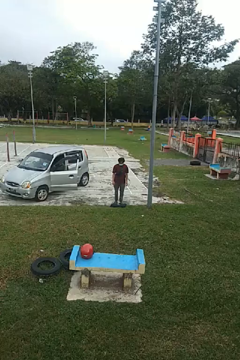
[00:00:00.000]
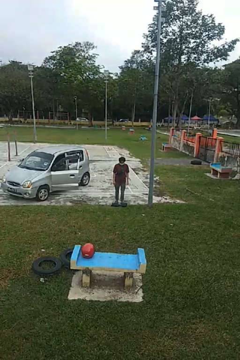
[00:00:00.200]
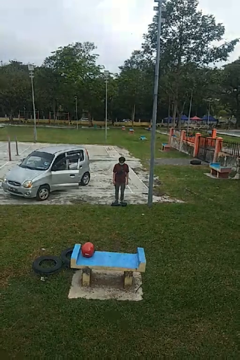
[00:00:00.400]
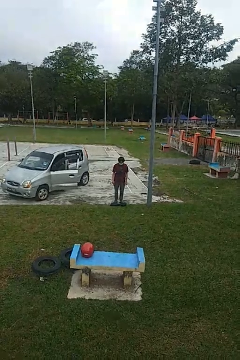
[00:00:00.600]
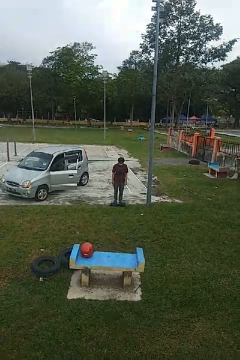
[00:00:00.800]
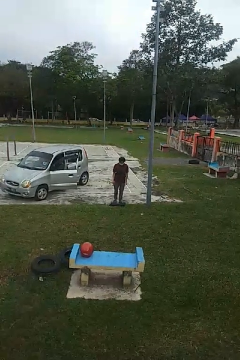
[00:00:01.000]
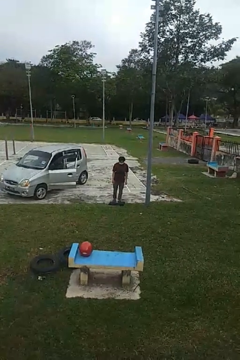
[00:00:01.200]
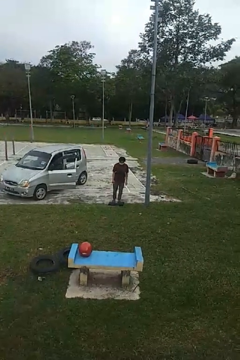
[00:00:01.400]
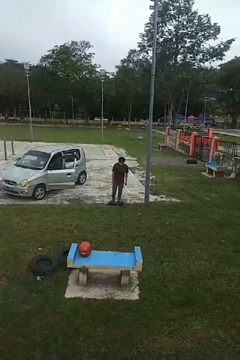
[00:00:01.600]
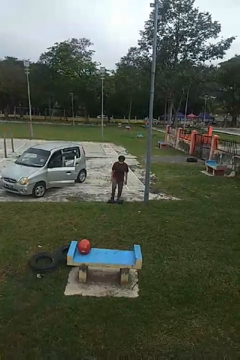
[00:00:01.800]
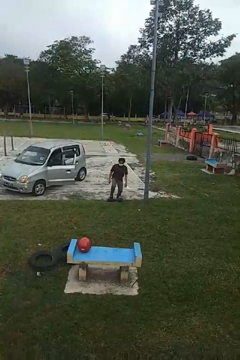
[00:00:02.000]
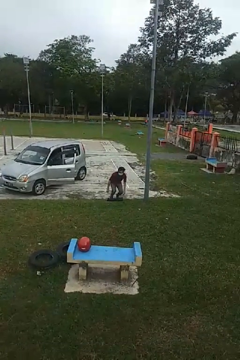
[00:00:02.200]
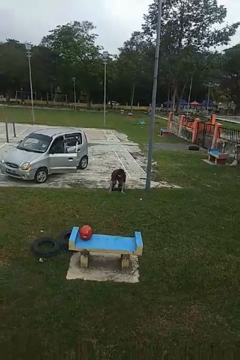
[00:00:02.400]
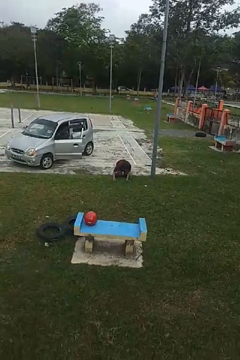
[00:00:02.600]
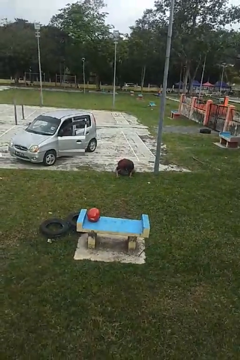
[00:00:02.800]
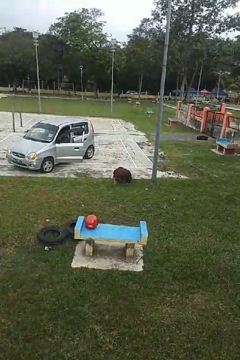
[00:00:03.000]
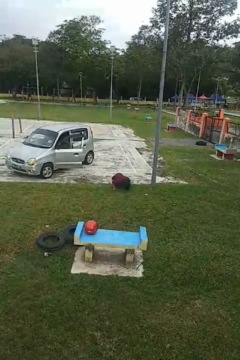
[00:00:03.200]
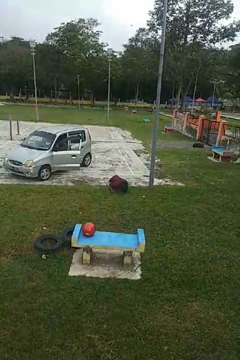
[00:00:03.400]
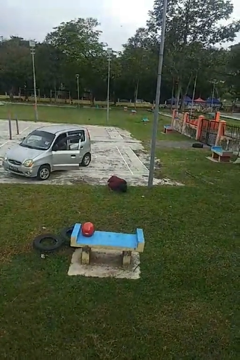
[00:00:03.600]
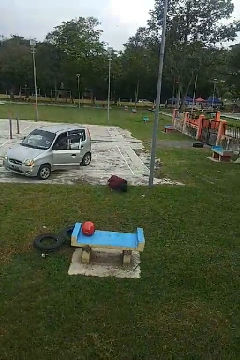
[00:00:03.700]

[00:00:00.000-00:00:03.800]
person trips on object on floor

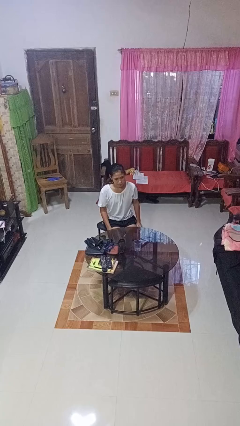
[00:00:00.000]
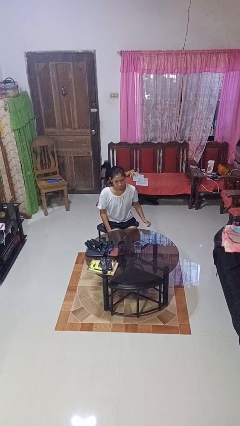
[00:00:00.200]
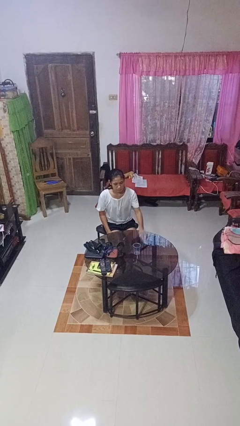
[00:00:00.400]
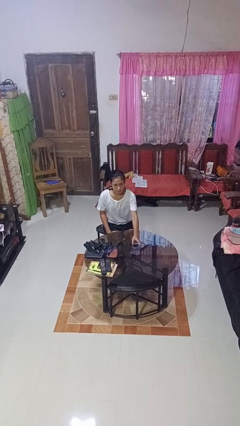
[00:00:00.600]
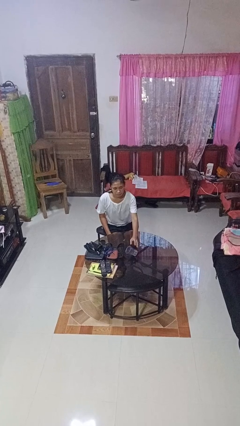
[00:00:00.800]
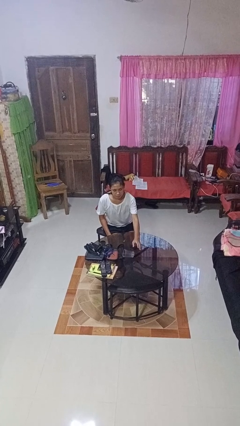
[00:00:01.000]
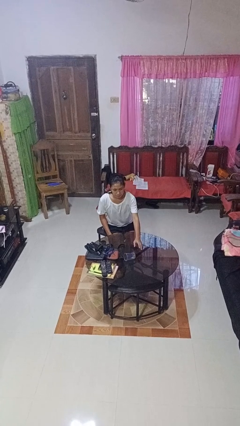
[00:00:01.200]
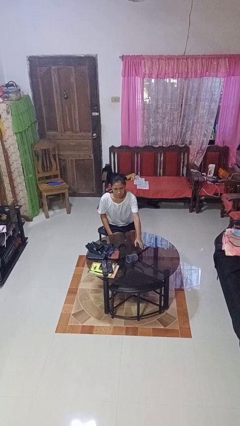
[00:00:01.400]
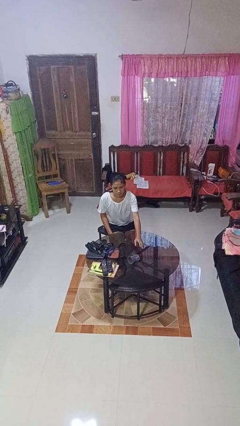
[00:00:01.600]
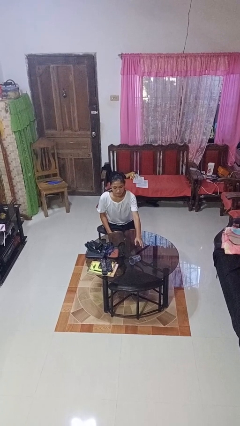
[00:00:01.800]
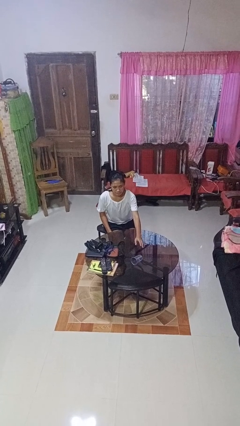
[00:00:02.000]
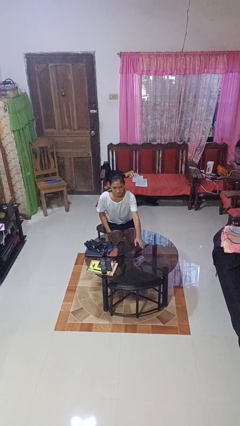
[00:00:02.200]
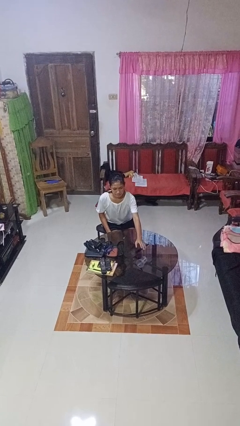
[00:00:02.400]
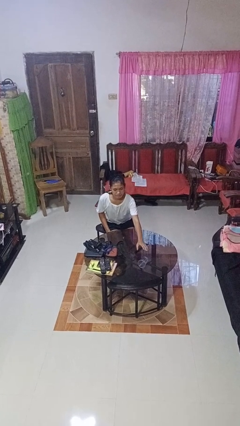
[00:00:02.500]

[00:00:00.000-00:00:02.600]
person knocks over glass

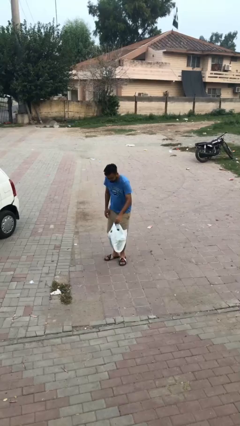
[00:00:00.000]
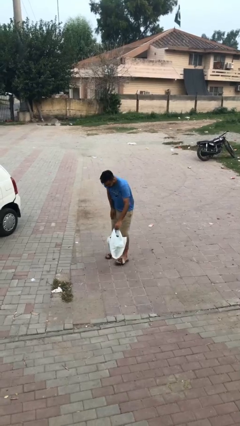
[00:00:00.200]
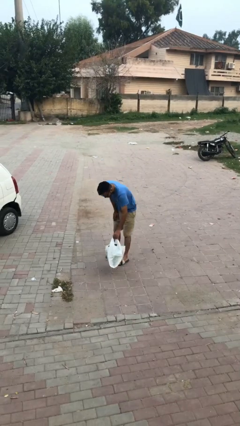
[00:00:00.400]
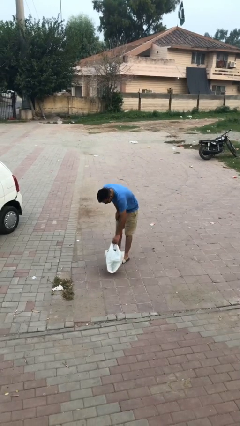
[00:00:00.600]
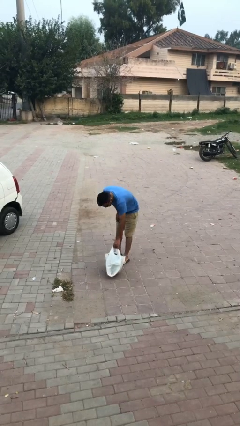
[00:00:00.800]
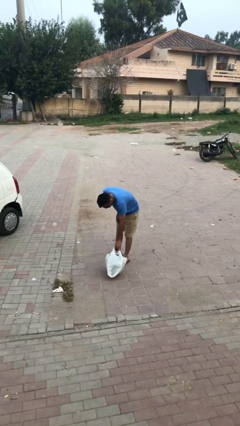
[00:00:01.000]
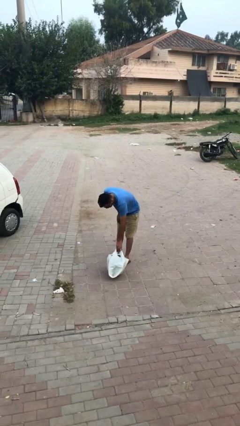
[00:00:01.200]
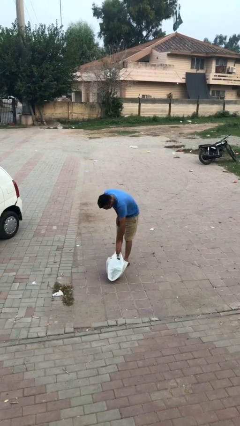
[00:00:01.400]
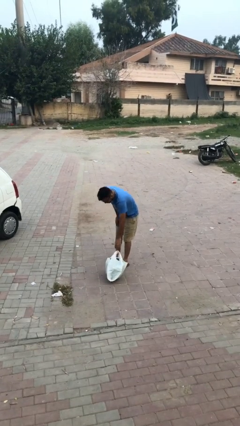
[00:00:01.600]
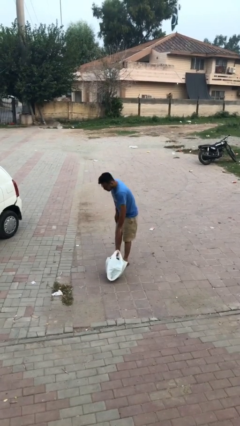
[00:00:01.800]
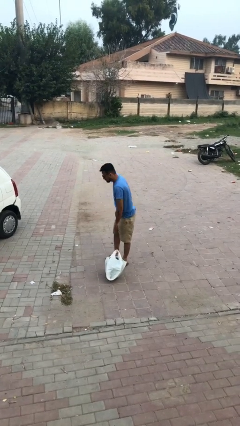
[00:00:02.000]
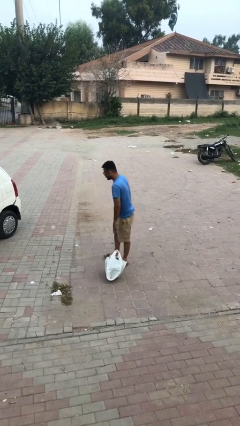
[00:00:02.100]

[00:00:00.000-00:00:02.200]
person puts down object on floor

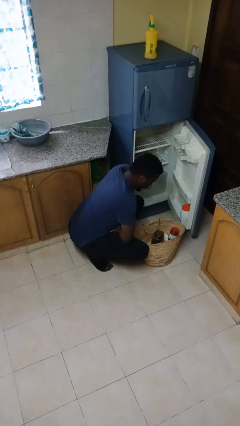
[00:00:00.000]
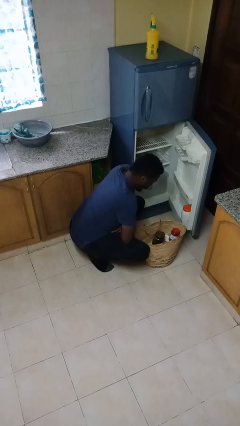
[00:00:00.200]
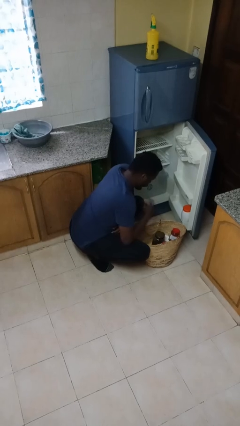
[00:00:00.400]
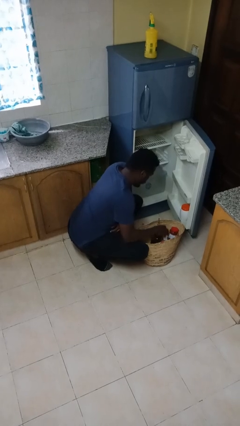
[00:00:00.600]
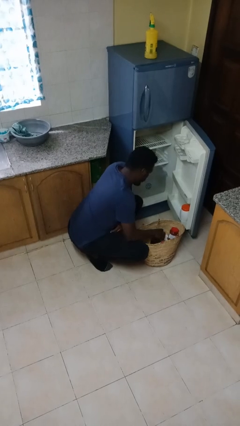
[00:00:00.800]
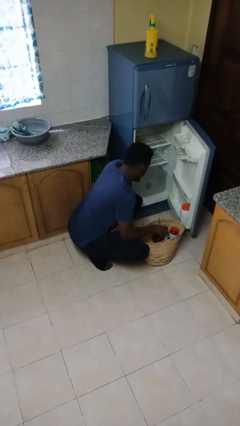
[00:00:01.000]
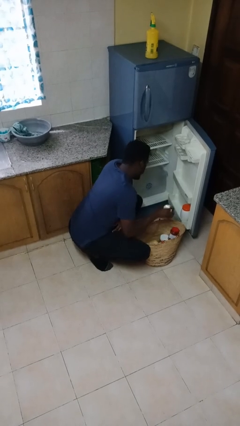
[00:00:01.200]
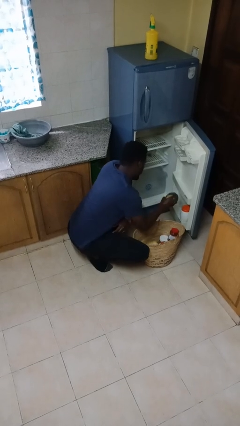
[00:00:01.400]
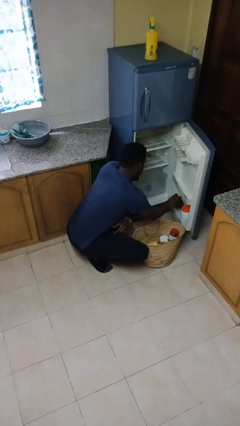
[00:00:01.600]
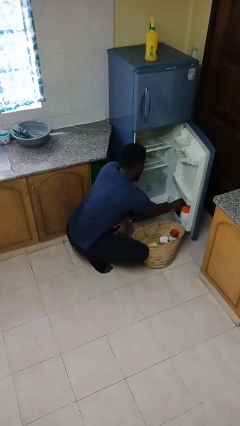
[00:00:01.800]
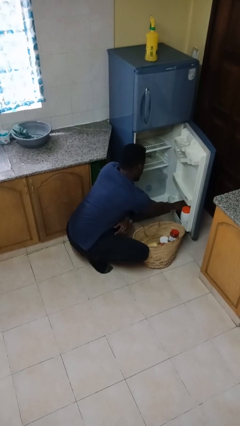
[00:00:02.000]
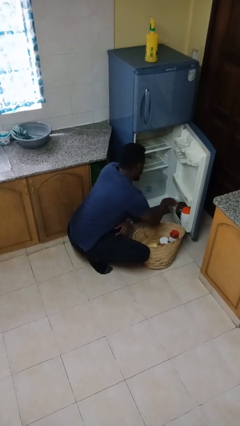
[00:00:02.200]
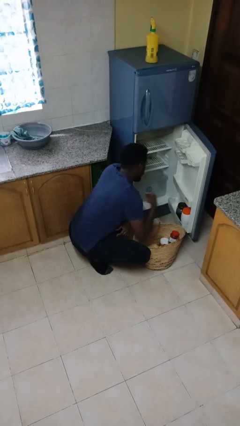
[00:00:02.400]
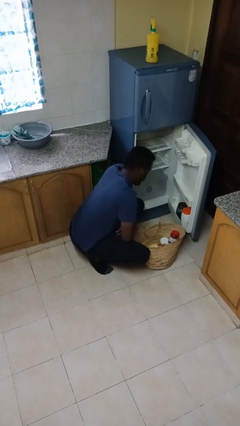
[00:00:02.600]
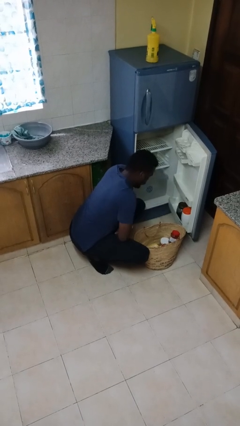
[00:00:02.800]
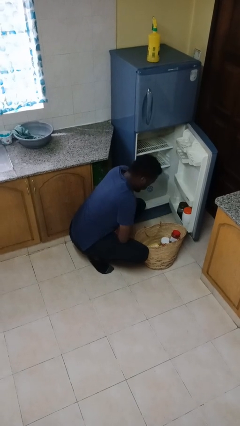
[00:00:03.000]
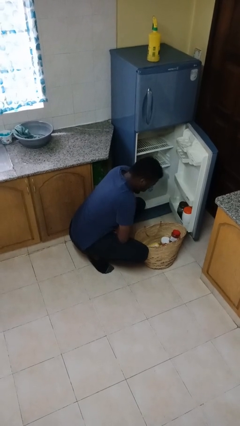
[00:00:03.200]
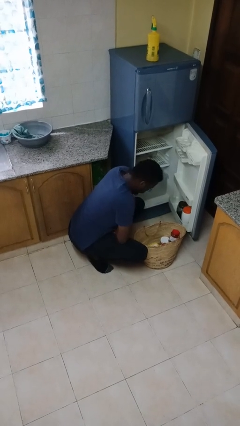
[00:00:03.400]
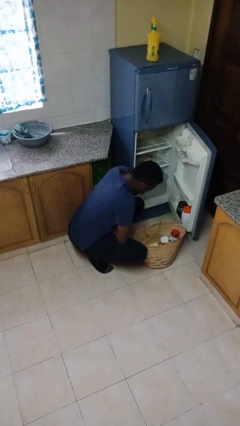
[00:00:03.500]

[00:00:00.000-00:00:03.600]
person loads groceries into refrigerator

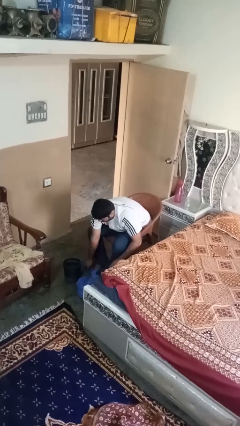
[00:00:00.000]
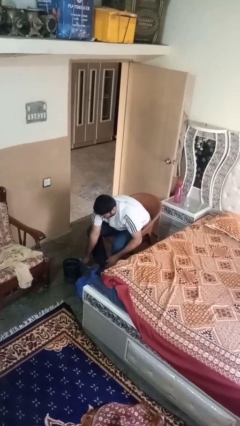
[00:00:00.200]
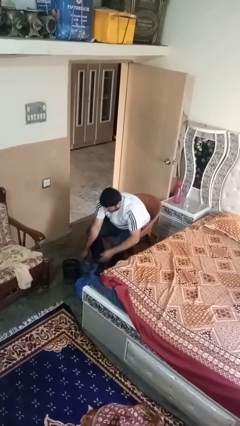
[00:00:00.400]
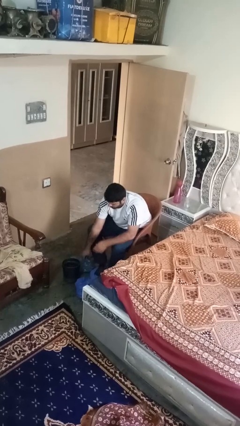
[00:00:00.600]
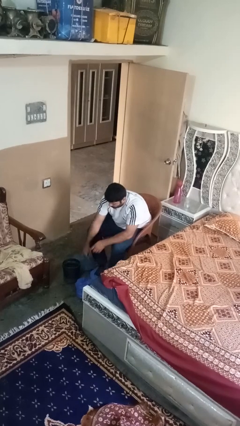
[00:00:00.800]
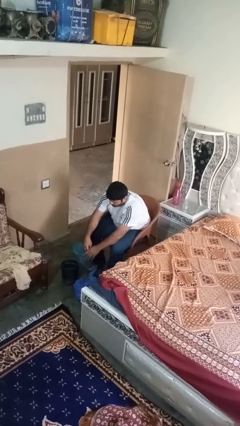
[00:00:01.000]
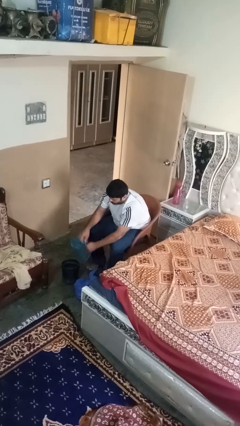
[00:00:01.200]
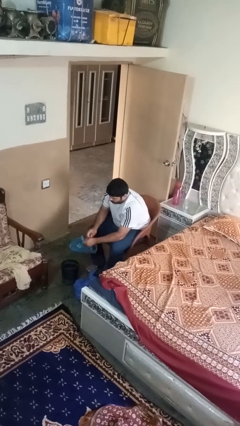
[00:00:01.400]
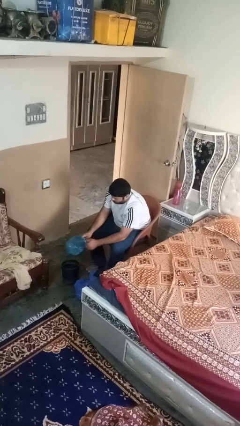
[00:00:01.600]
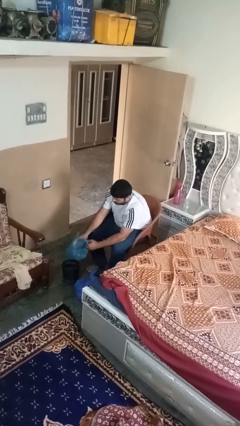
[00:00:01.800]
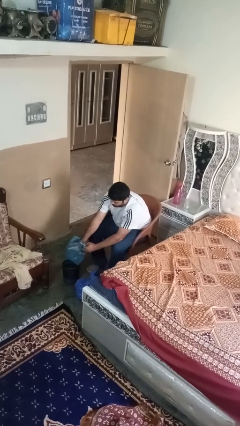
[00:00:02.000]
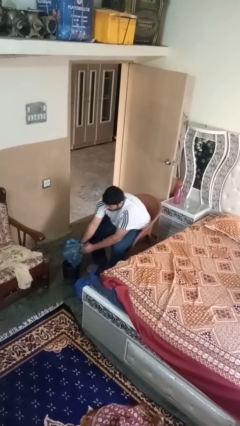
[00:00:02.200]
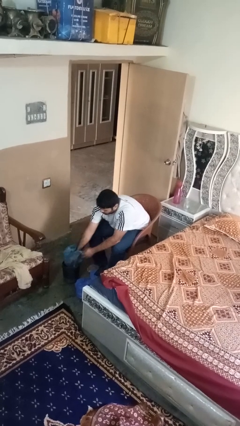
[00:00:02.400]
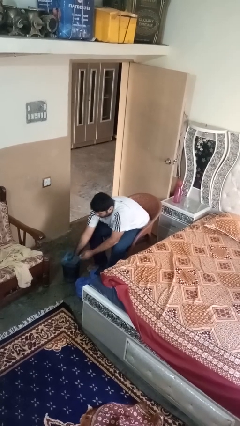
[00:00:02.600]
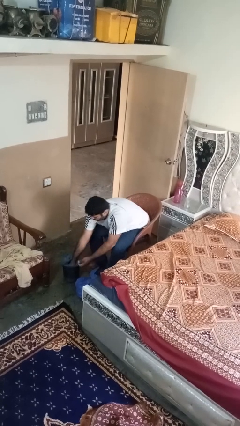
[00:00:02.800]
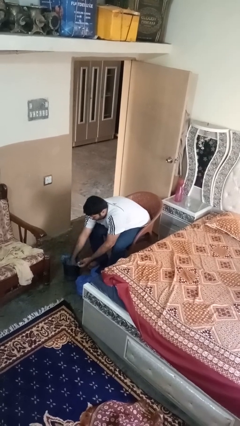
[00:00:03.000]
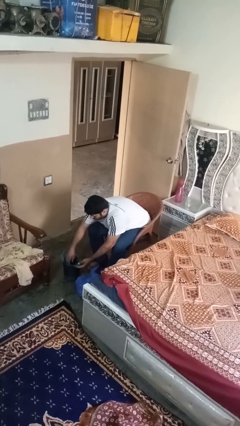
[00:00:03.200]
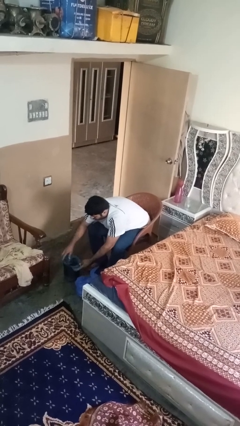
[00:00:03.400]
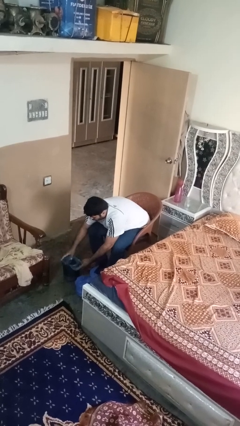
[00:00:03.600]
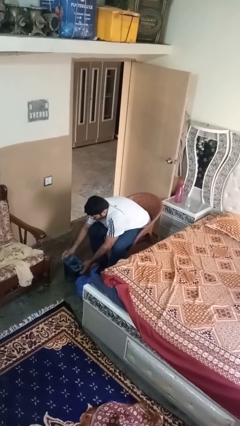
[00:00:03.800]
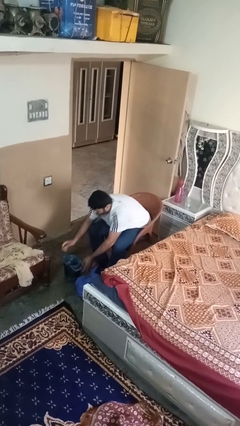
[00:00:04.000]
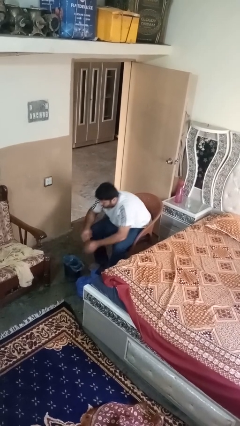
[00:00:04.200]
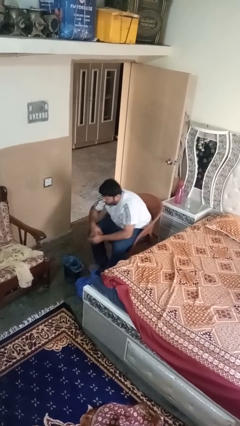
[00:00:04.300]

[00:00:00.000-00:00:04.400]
person inserts trashbag into trashcan

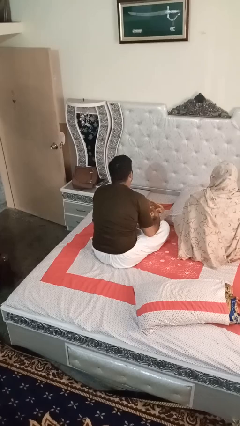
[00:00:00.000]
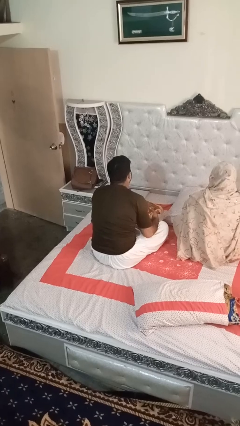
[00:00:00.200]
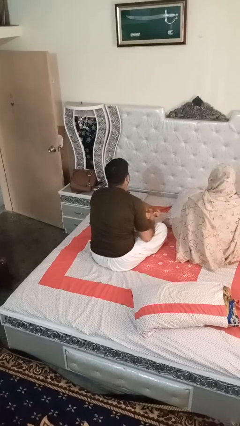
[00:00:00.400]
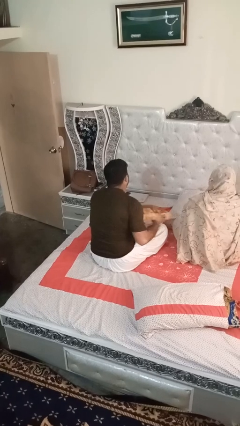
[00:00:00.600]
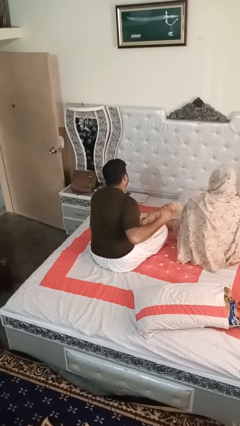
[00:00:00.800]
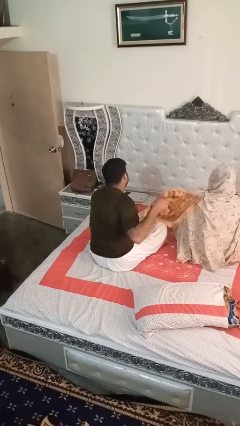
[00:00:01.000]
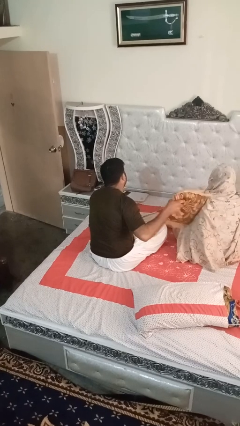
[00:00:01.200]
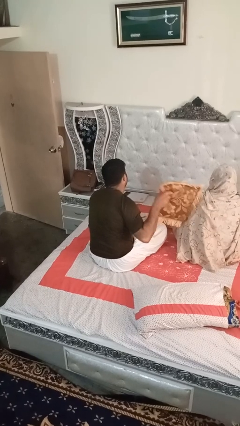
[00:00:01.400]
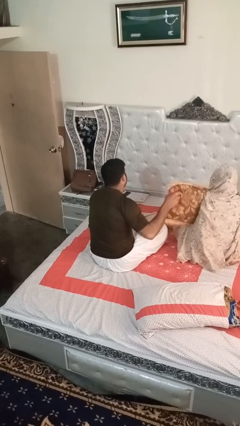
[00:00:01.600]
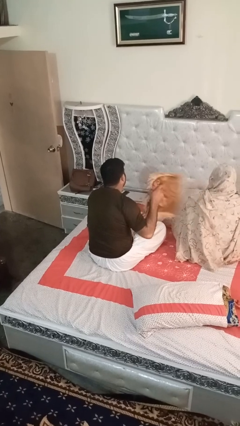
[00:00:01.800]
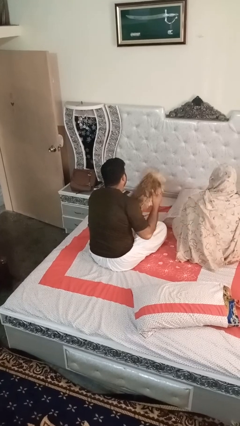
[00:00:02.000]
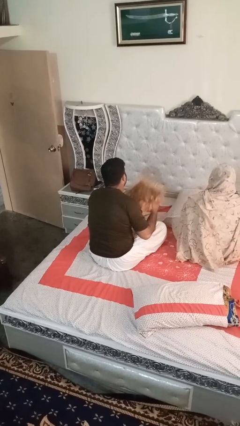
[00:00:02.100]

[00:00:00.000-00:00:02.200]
person hits person with pillow
